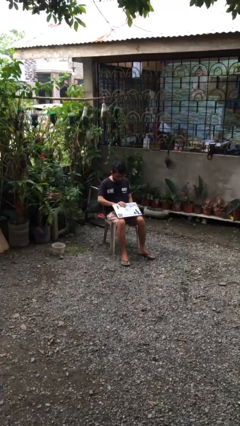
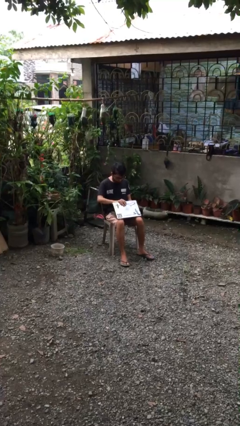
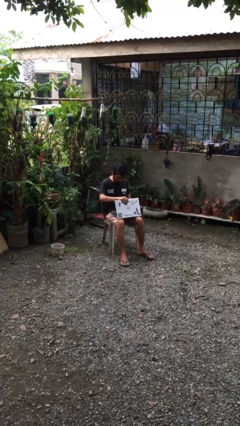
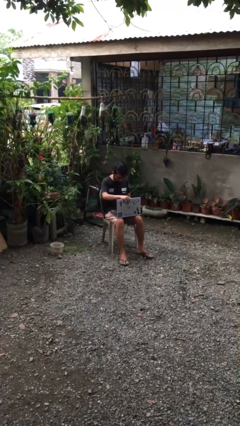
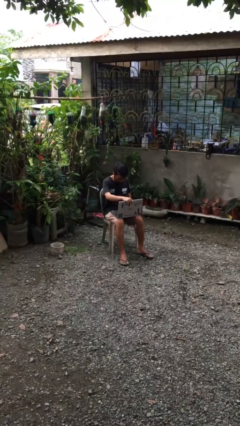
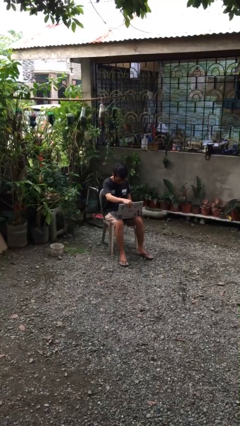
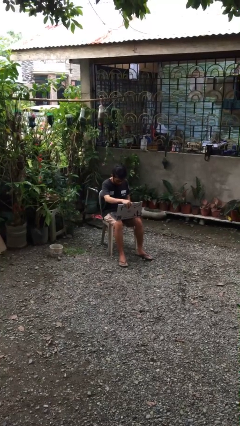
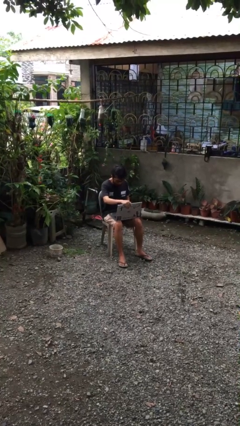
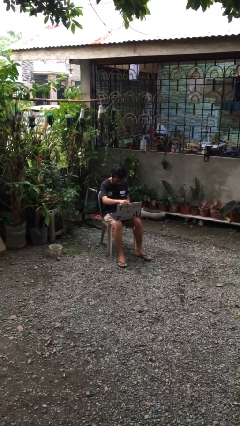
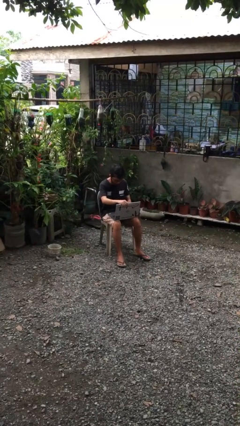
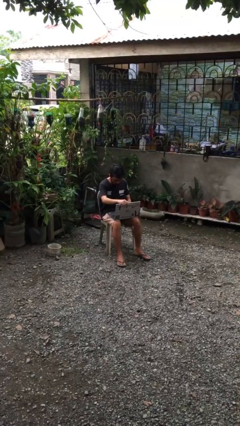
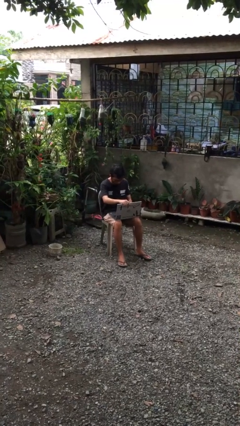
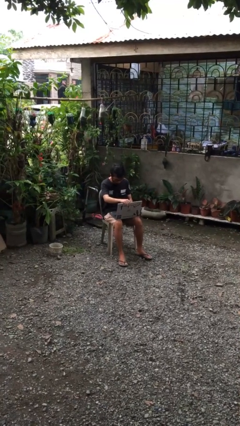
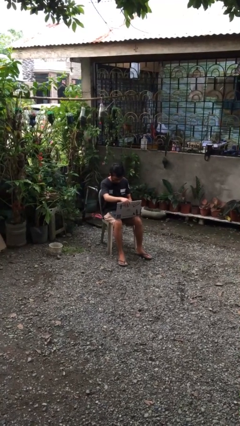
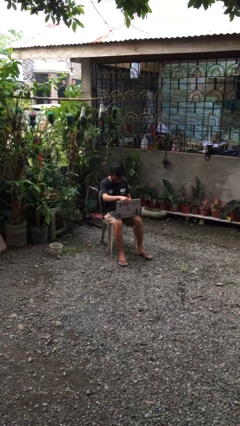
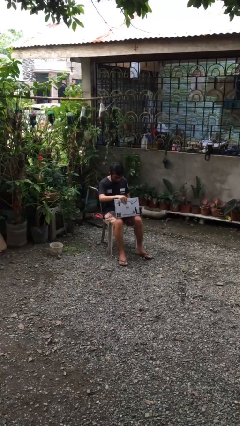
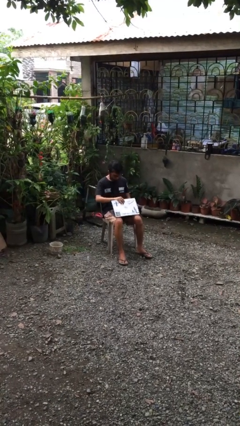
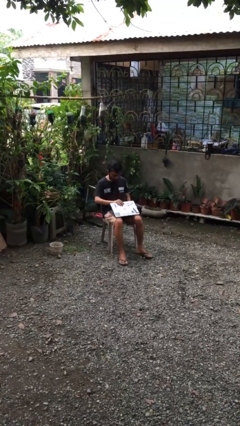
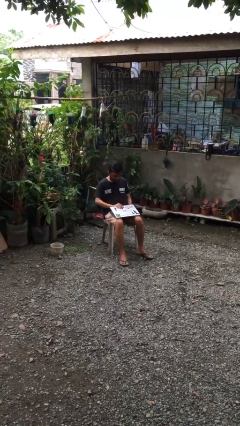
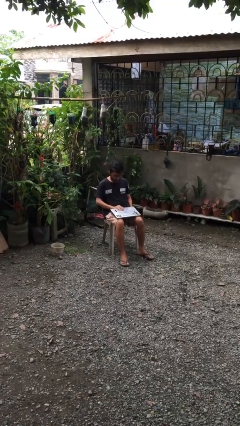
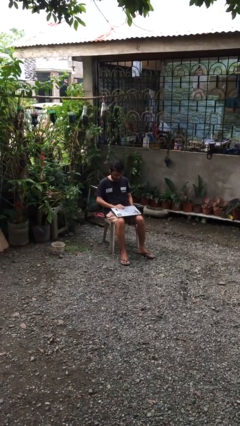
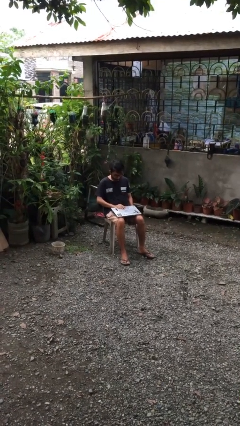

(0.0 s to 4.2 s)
person interacts with laptop

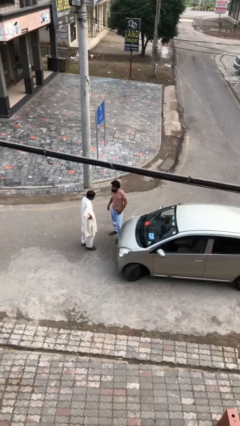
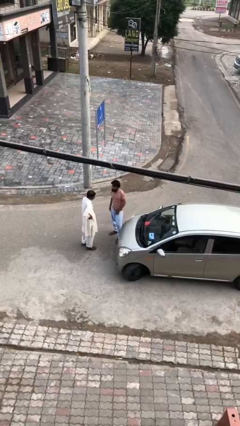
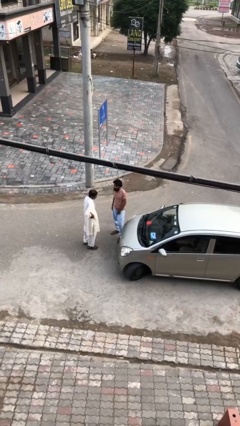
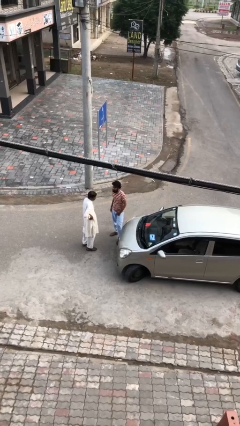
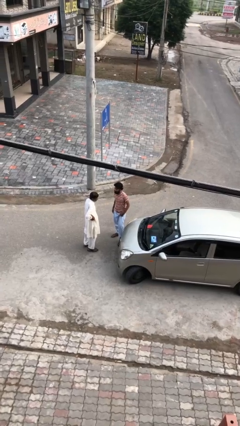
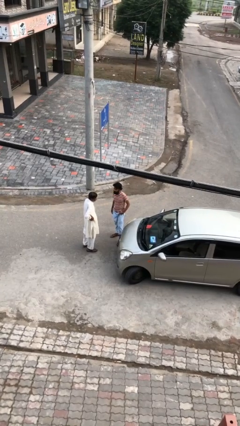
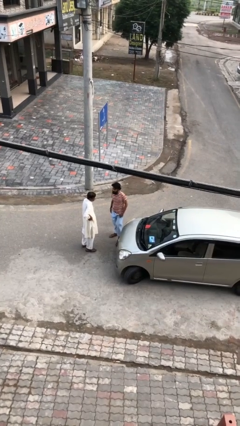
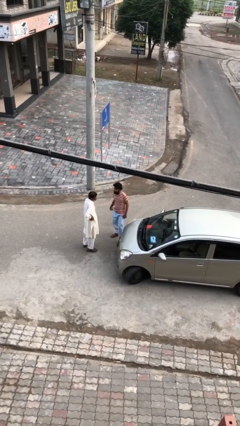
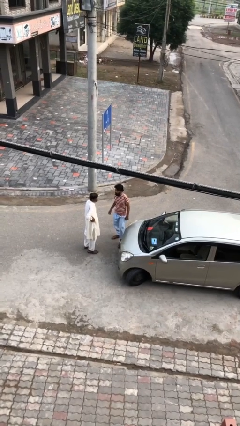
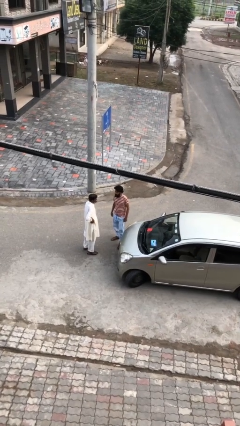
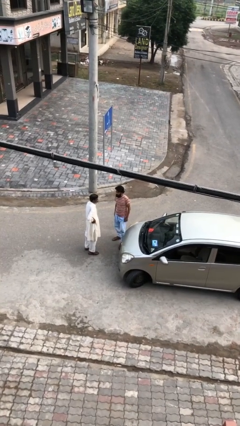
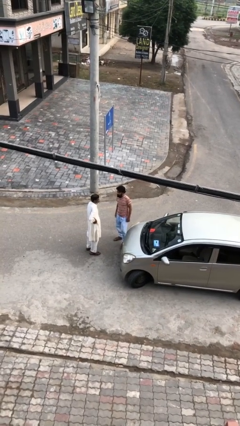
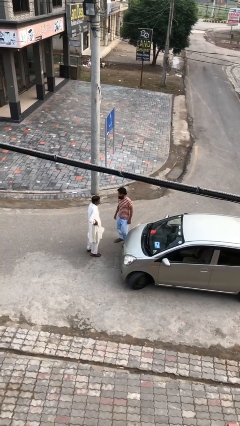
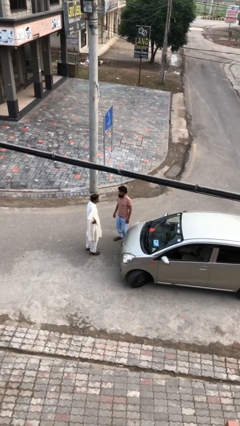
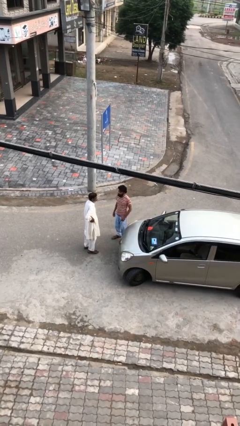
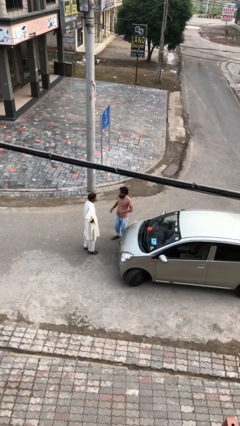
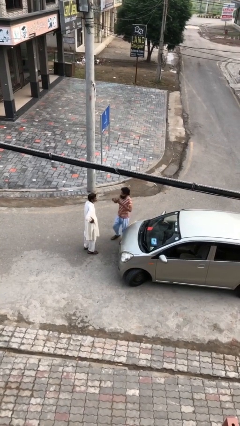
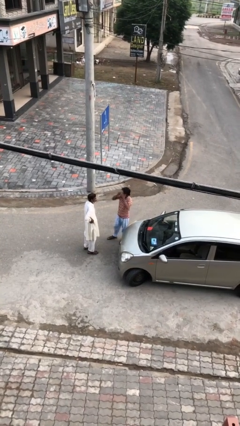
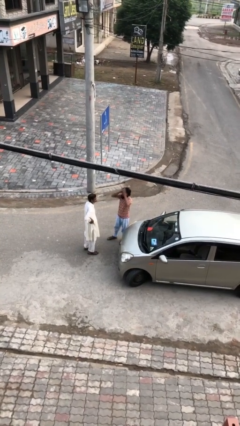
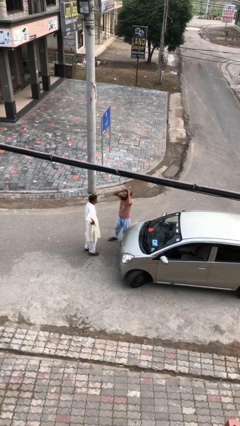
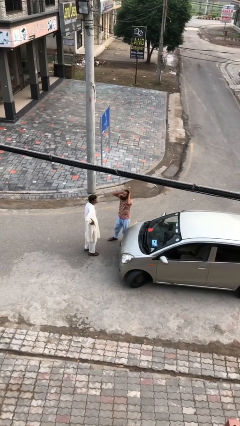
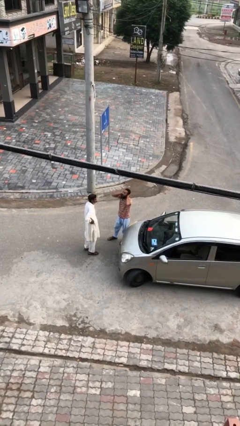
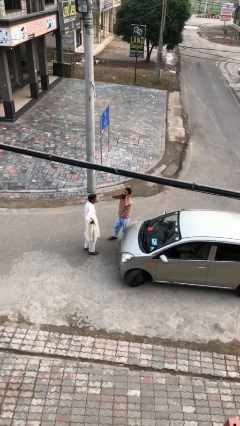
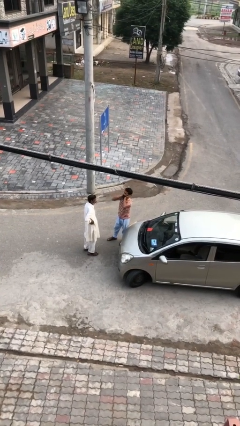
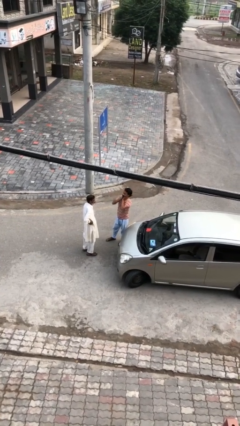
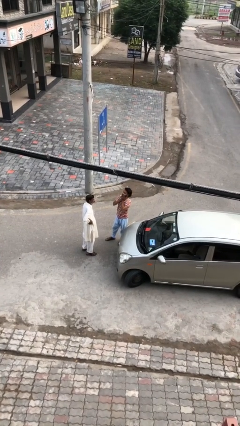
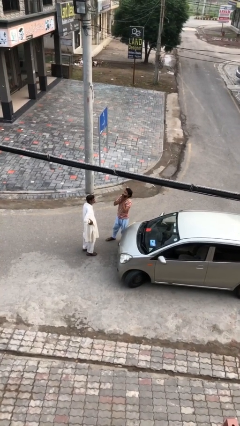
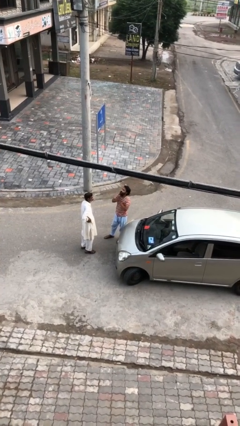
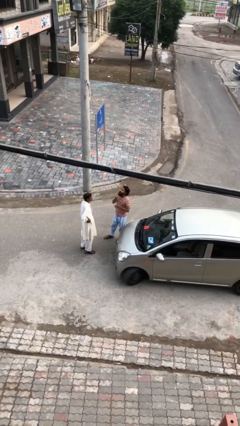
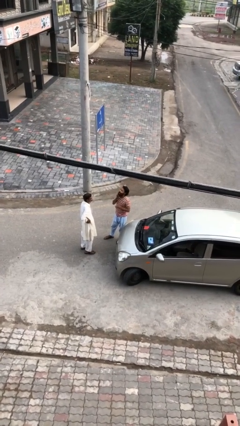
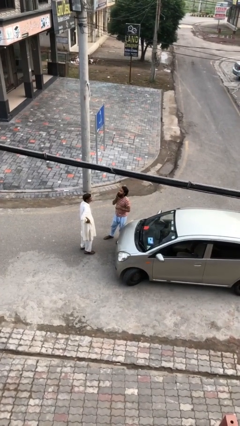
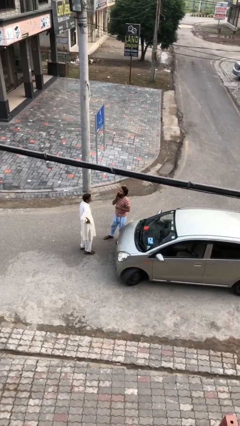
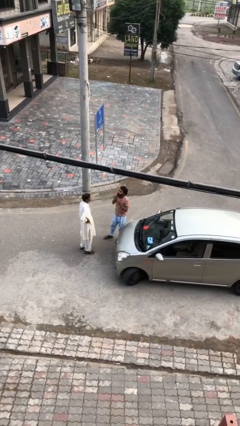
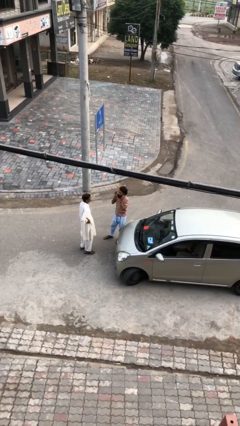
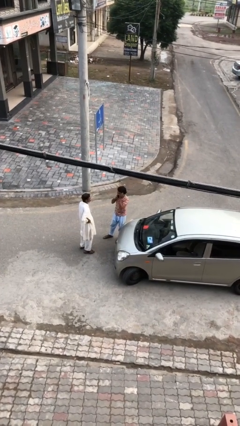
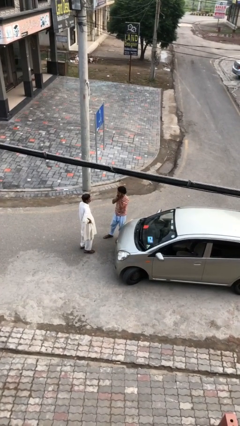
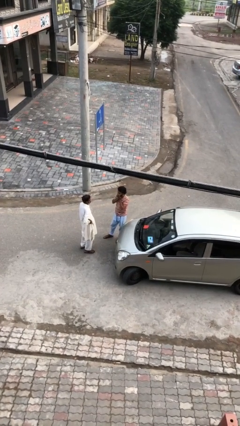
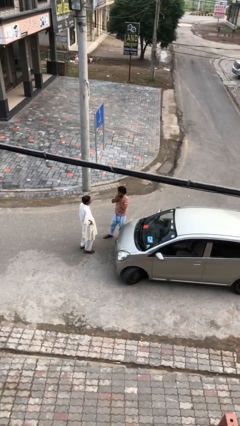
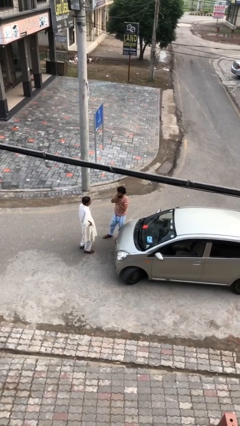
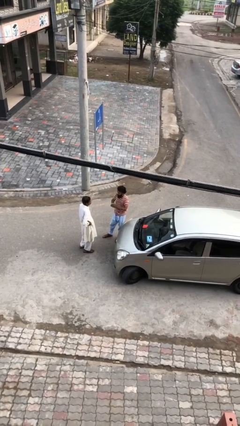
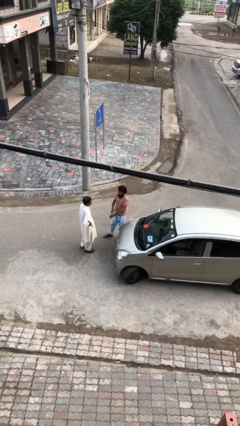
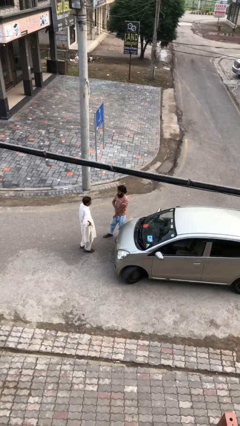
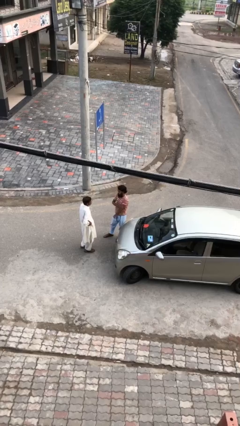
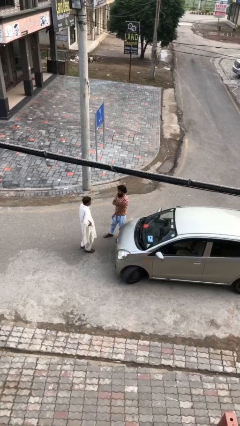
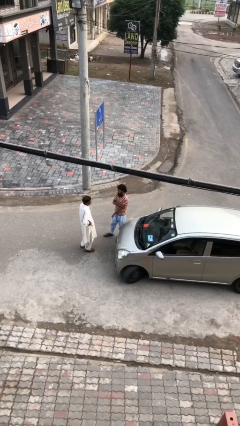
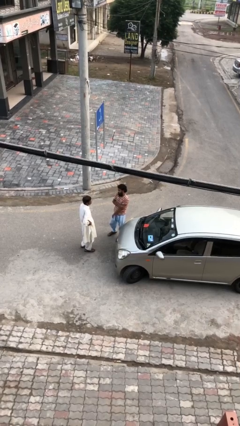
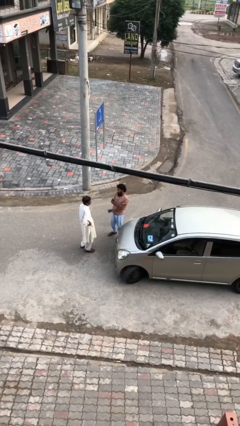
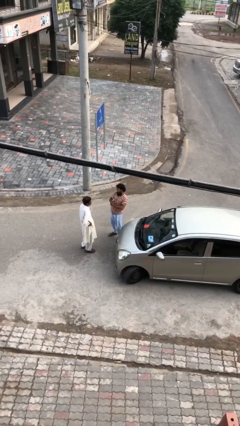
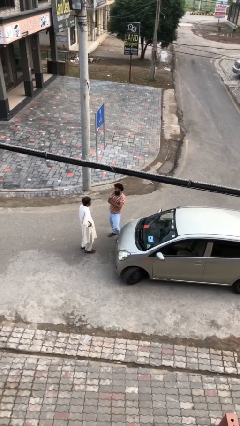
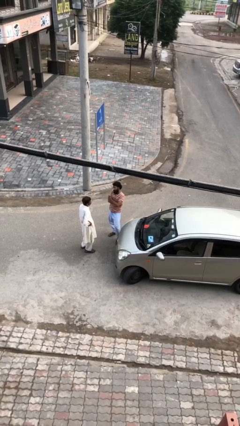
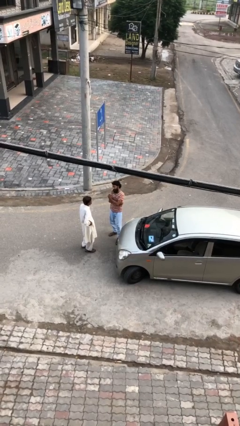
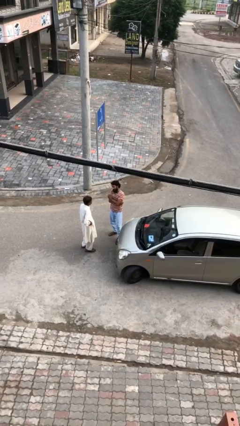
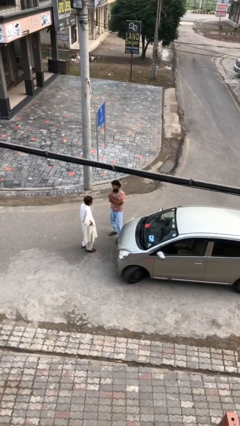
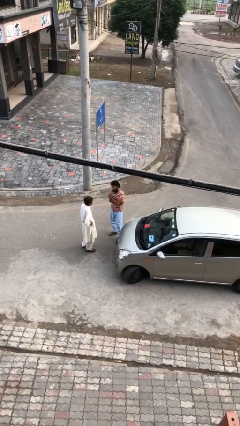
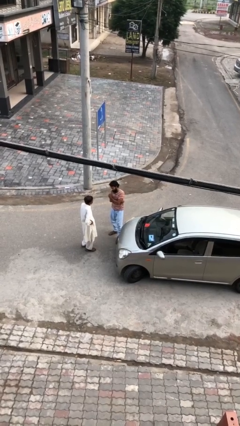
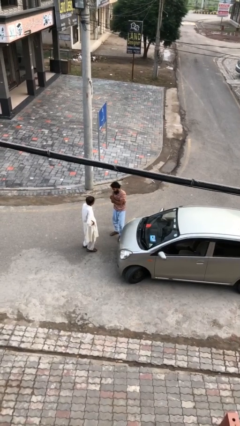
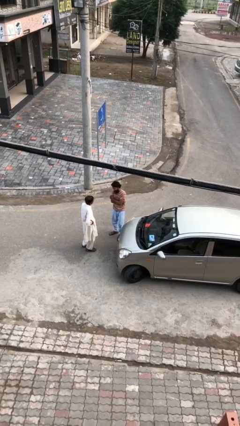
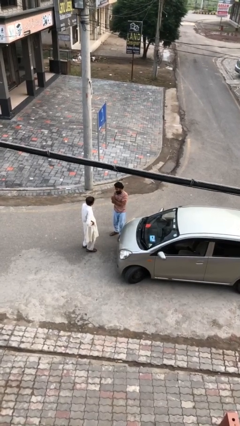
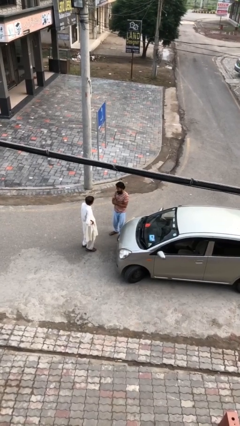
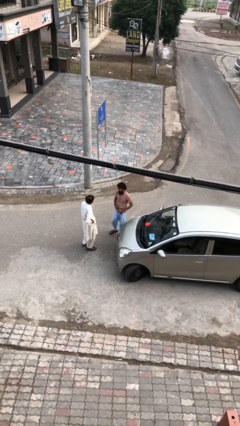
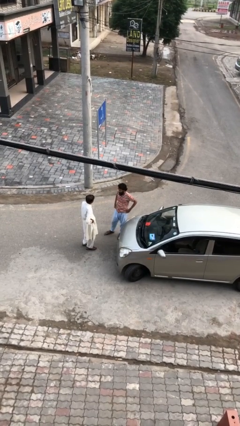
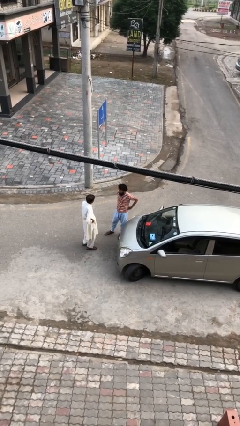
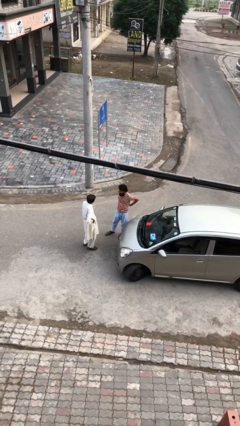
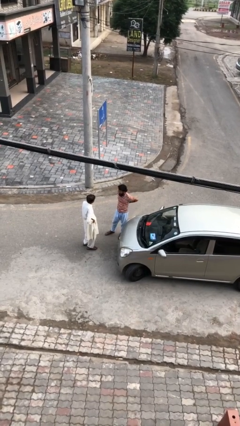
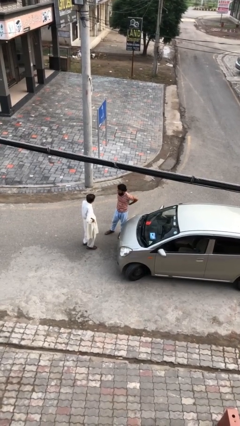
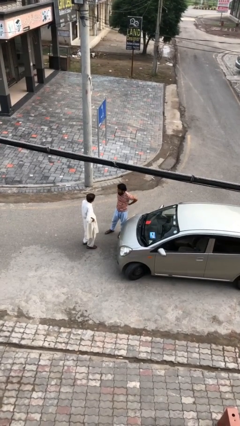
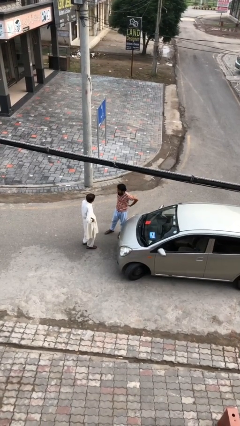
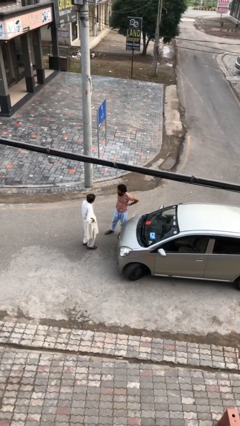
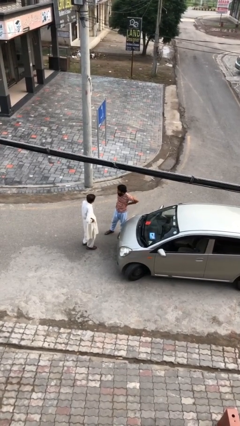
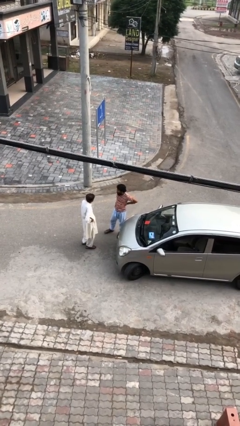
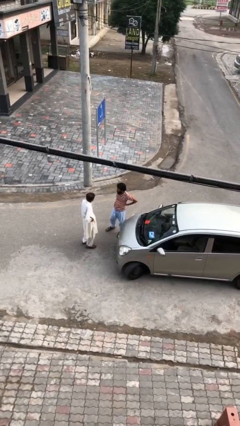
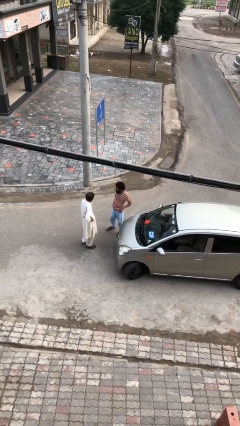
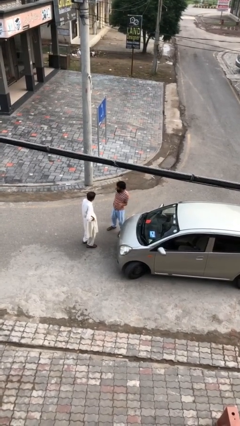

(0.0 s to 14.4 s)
person talks to person
